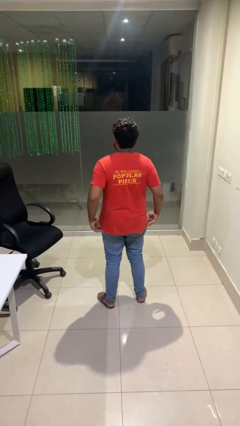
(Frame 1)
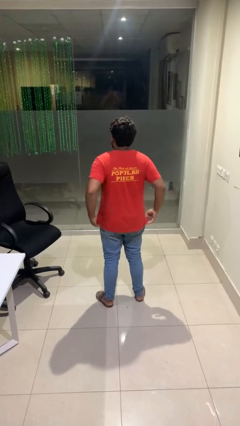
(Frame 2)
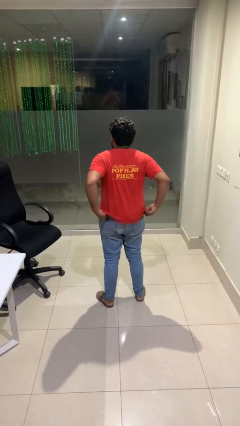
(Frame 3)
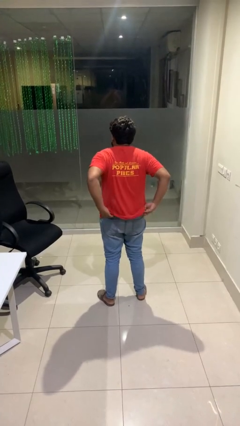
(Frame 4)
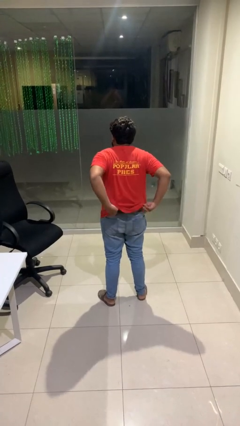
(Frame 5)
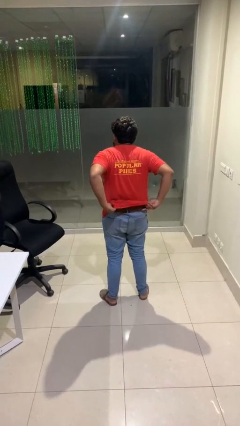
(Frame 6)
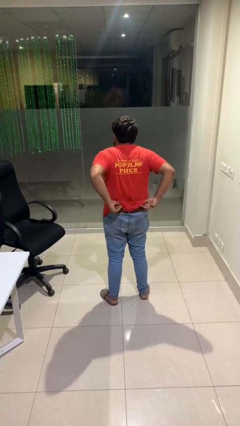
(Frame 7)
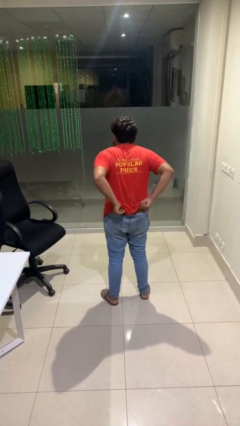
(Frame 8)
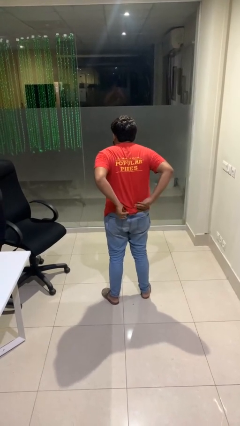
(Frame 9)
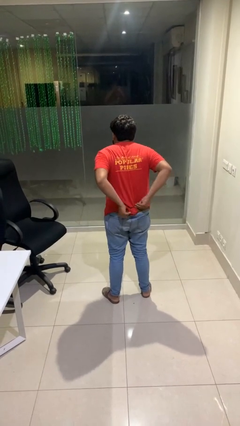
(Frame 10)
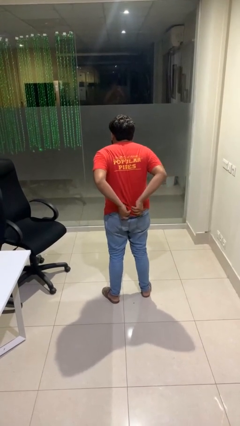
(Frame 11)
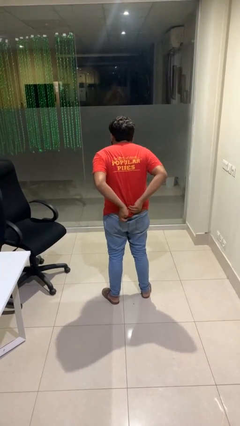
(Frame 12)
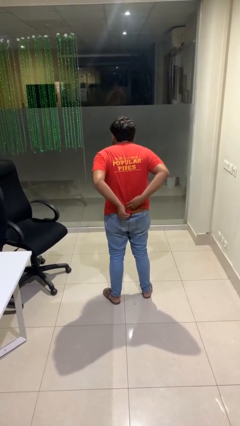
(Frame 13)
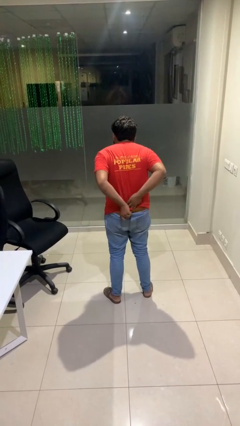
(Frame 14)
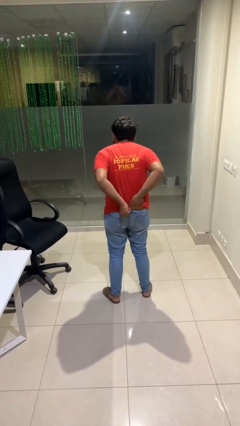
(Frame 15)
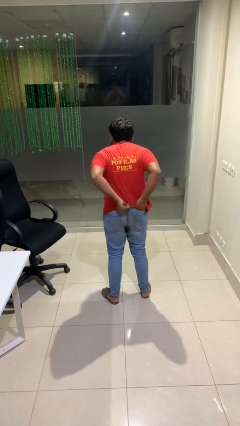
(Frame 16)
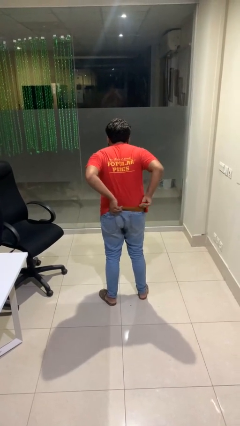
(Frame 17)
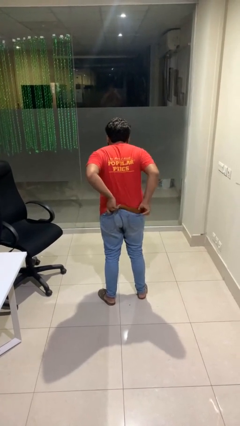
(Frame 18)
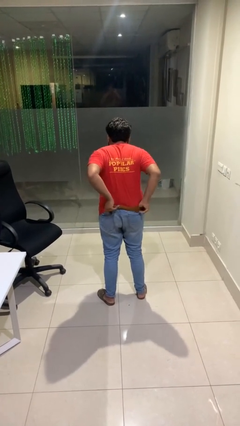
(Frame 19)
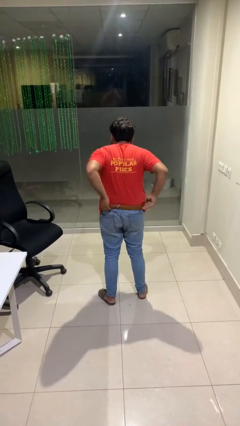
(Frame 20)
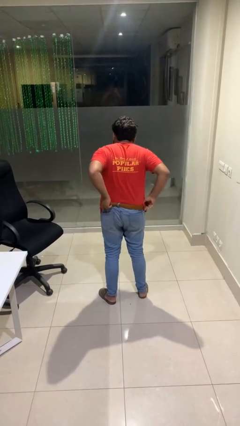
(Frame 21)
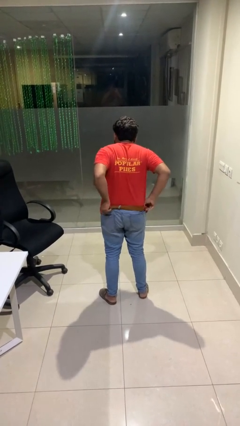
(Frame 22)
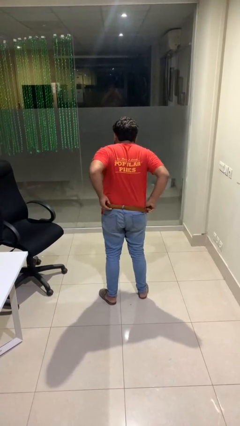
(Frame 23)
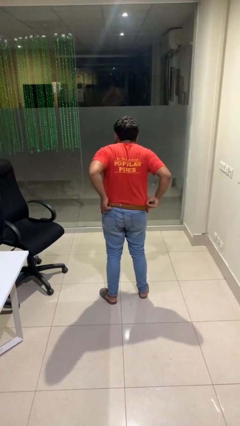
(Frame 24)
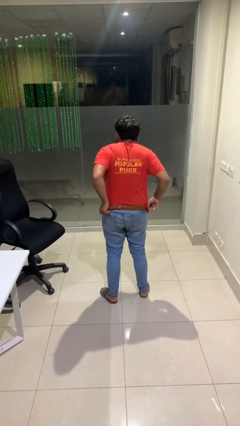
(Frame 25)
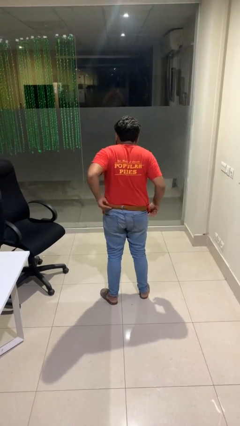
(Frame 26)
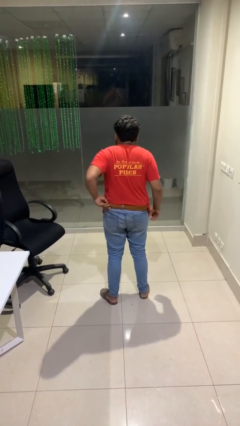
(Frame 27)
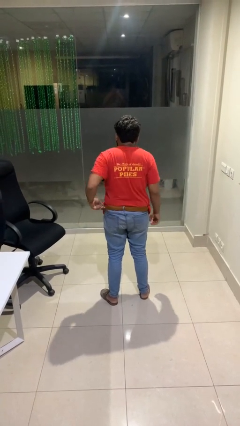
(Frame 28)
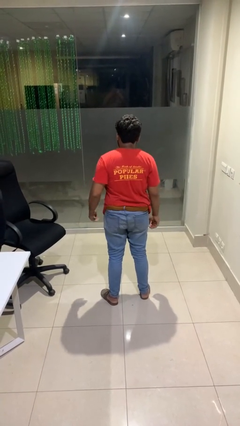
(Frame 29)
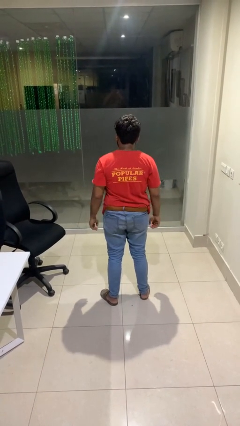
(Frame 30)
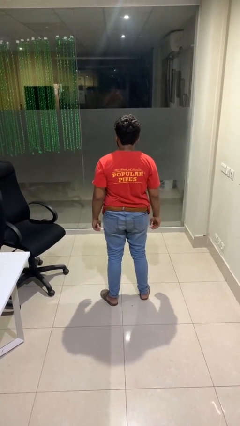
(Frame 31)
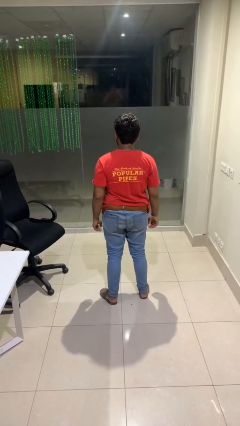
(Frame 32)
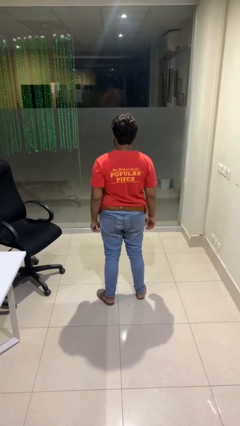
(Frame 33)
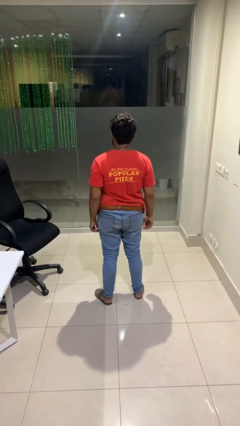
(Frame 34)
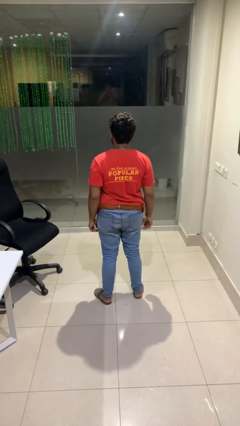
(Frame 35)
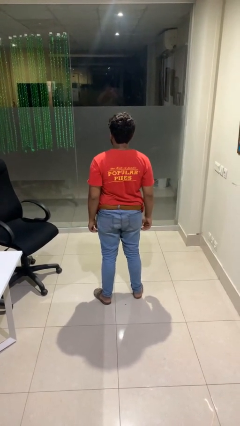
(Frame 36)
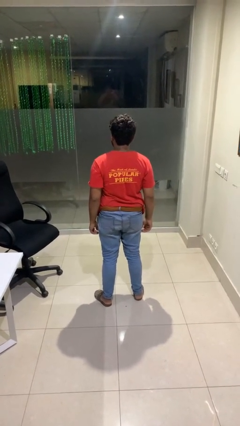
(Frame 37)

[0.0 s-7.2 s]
person tucks in shirt

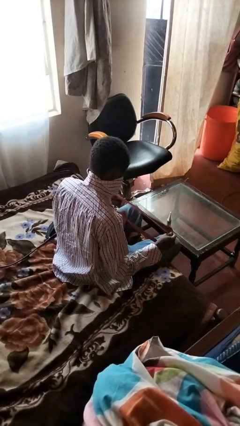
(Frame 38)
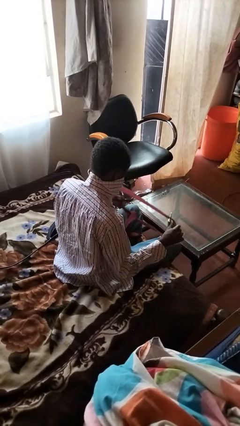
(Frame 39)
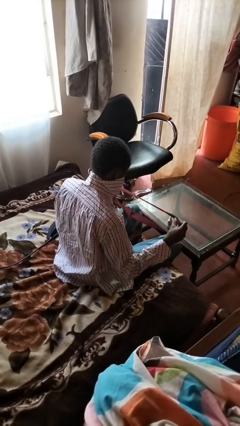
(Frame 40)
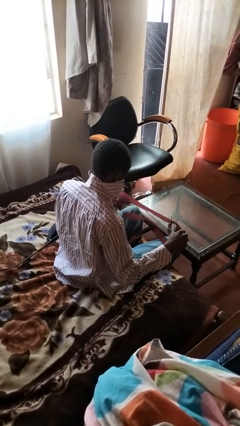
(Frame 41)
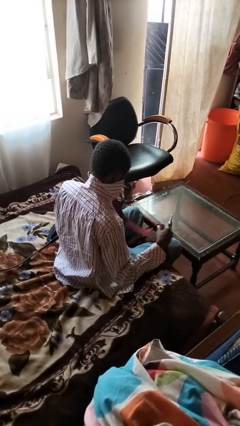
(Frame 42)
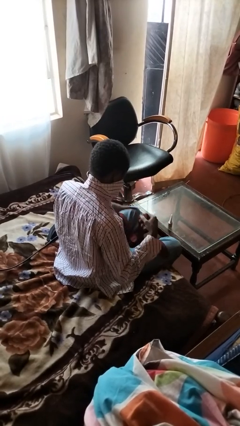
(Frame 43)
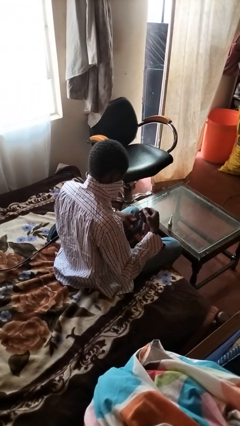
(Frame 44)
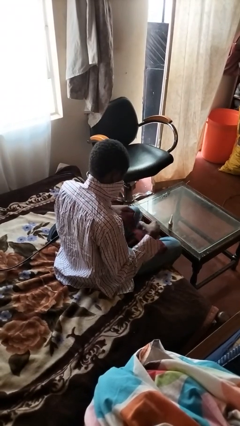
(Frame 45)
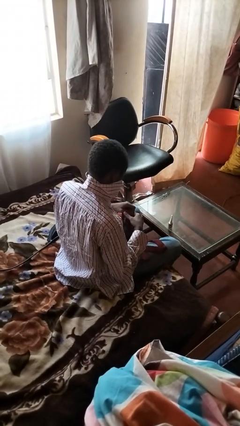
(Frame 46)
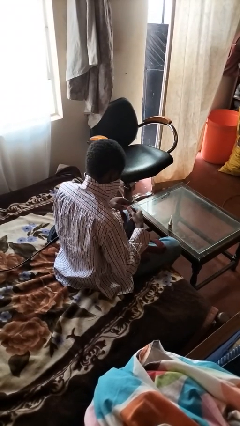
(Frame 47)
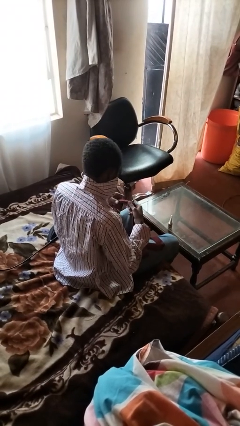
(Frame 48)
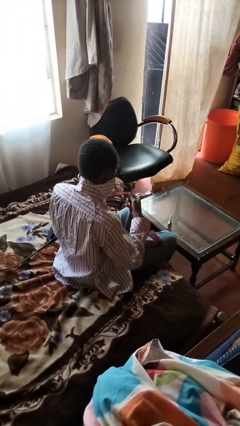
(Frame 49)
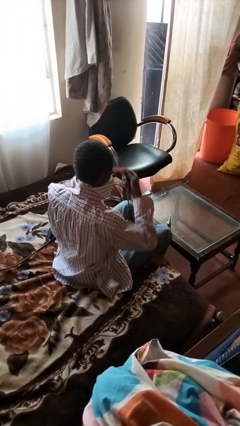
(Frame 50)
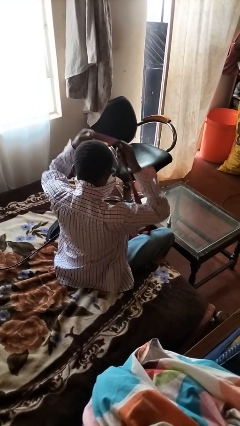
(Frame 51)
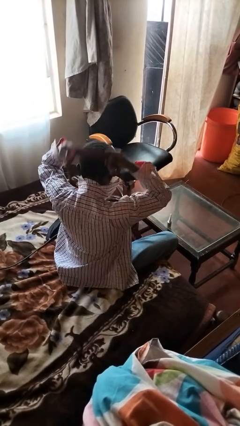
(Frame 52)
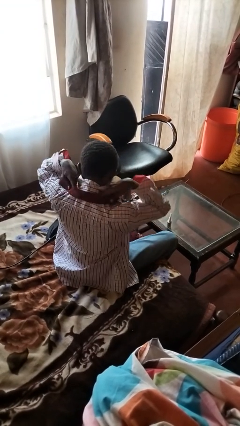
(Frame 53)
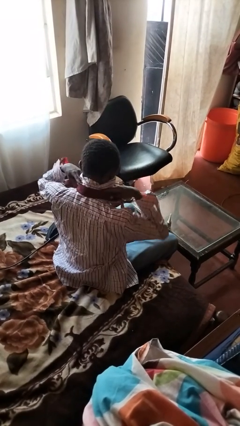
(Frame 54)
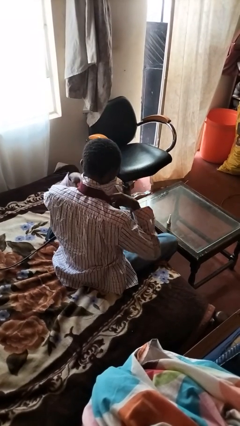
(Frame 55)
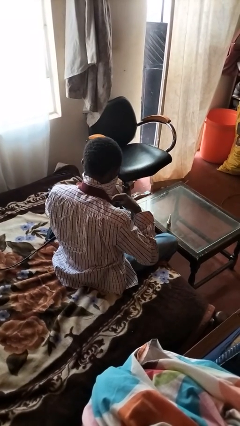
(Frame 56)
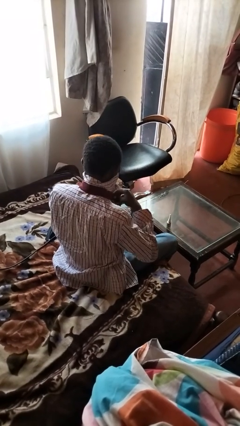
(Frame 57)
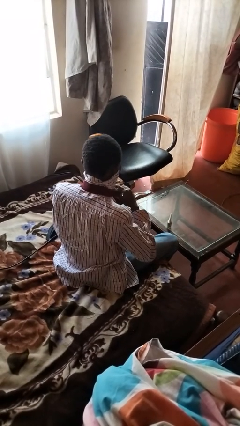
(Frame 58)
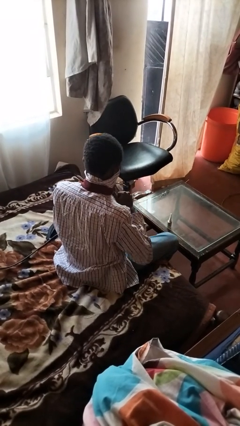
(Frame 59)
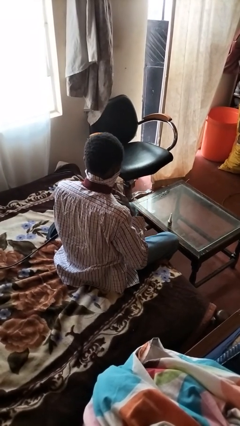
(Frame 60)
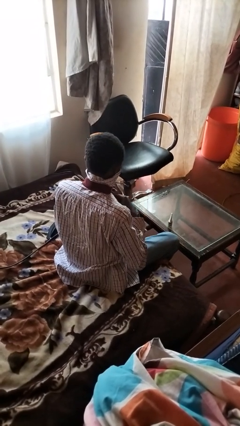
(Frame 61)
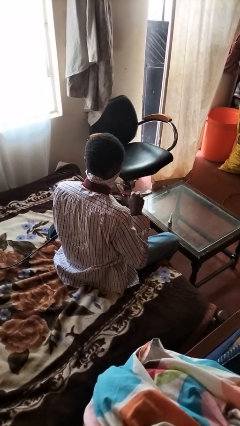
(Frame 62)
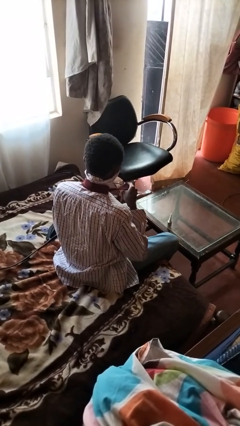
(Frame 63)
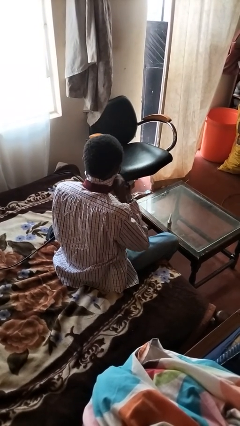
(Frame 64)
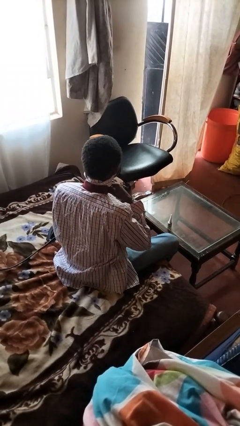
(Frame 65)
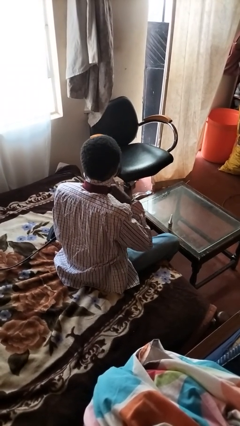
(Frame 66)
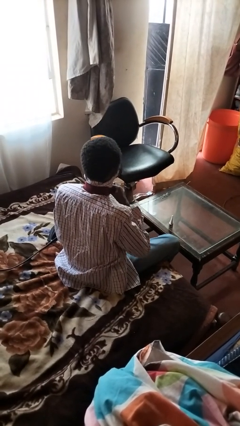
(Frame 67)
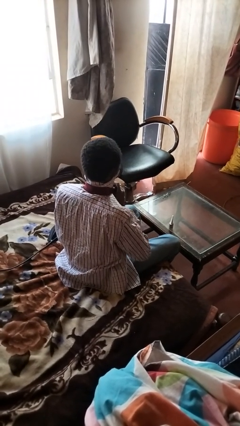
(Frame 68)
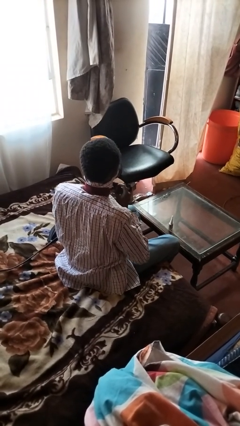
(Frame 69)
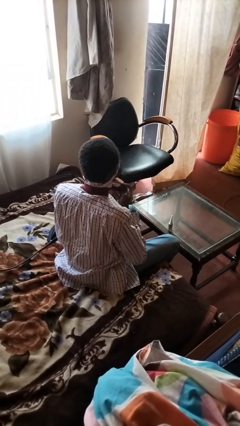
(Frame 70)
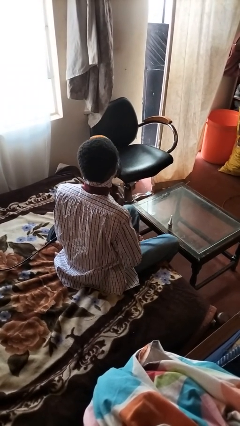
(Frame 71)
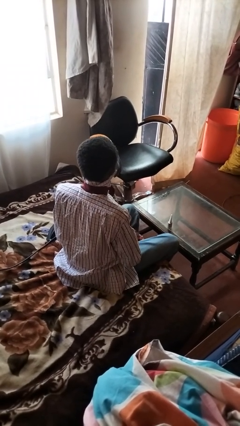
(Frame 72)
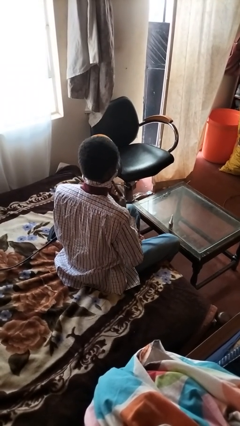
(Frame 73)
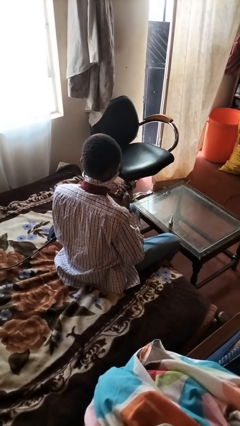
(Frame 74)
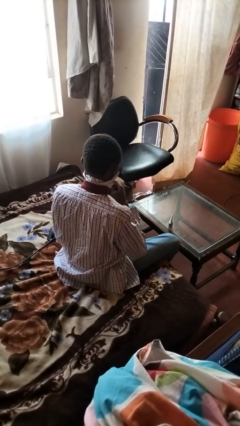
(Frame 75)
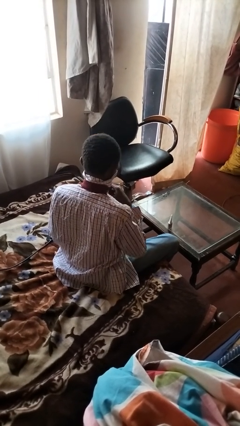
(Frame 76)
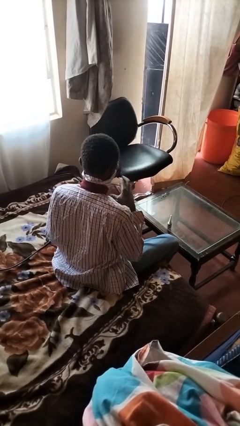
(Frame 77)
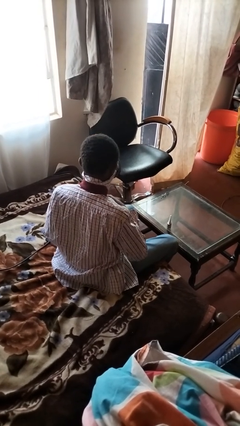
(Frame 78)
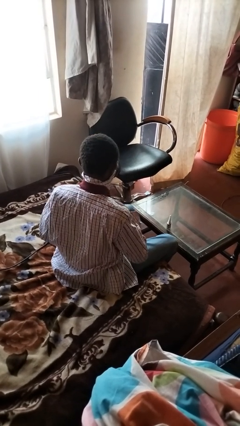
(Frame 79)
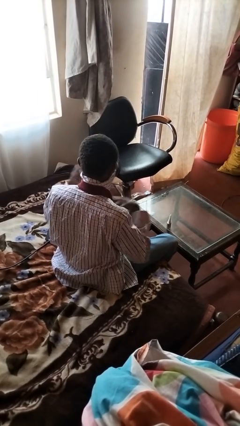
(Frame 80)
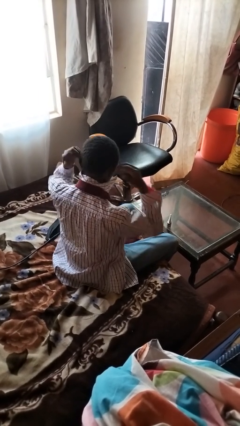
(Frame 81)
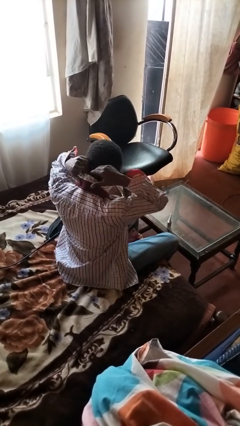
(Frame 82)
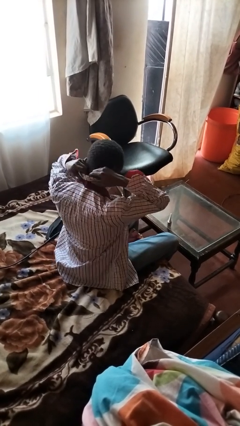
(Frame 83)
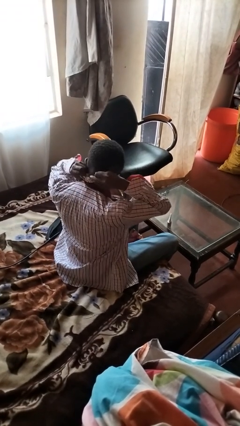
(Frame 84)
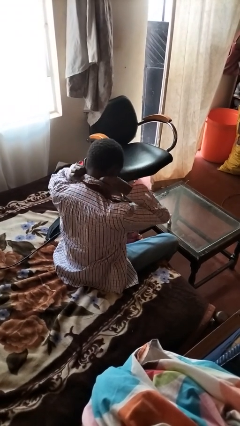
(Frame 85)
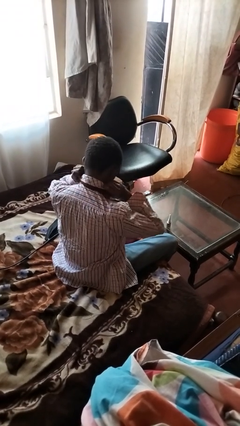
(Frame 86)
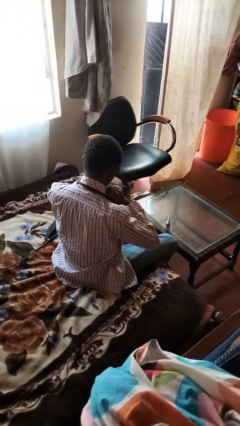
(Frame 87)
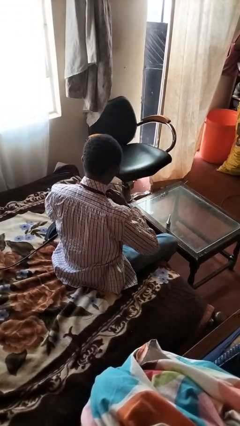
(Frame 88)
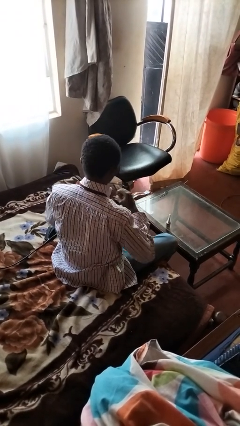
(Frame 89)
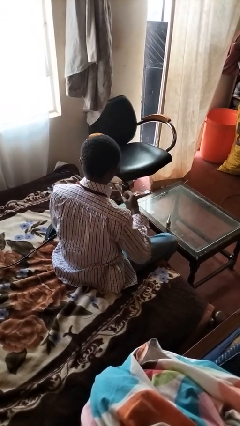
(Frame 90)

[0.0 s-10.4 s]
person puts on necktie

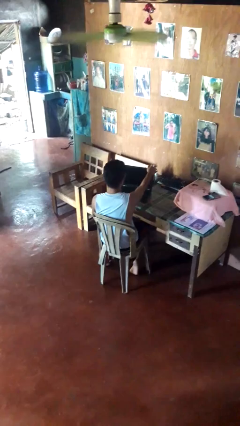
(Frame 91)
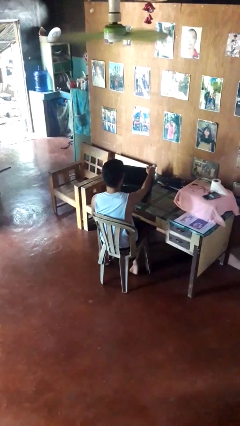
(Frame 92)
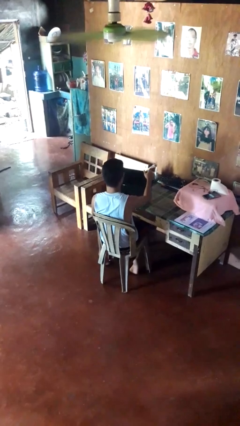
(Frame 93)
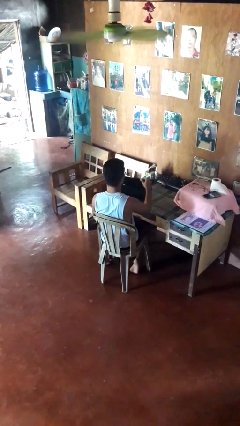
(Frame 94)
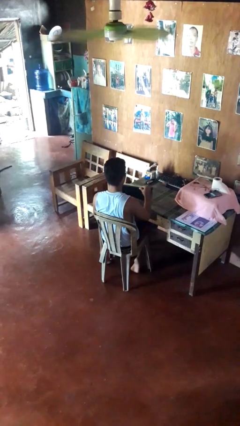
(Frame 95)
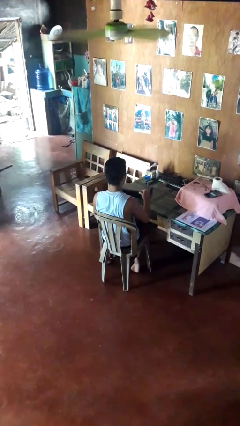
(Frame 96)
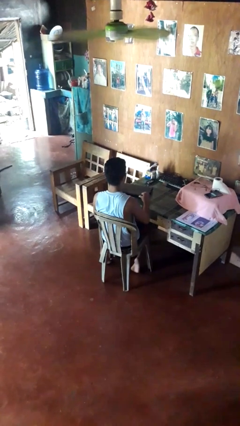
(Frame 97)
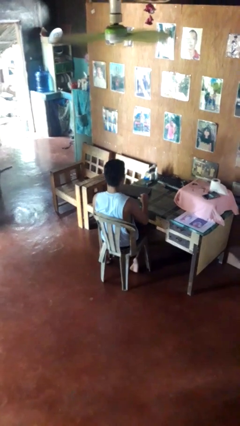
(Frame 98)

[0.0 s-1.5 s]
person closes laptop
